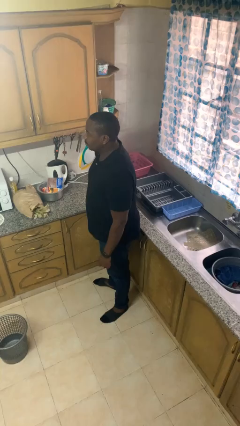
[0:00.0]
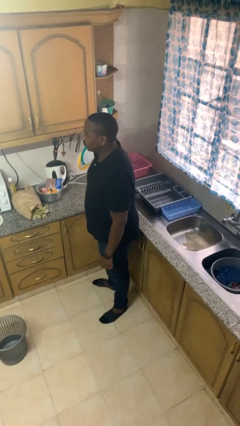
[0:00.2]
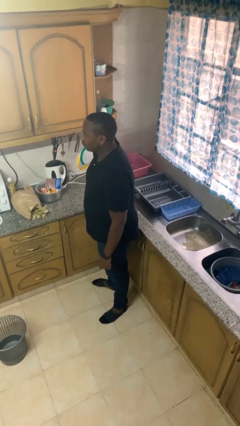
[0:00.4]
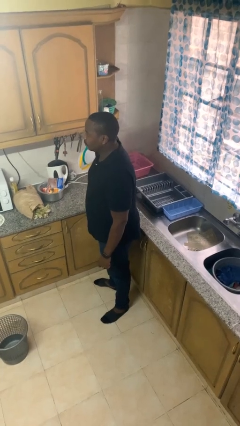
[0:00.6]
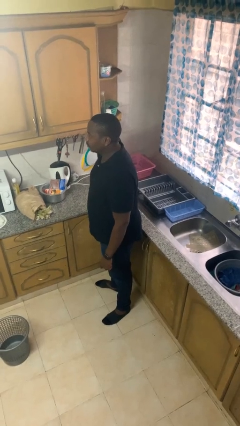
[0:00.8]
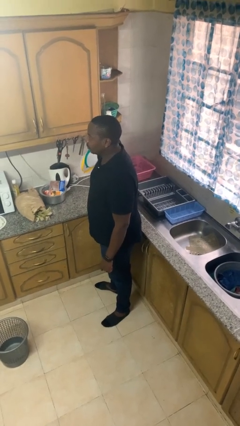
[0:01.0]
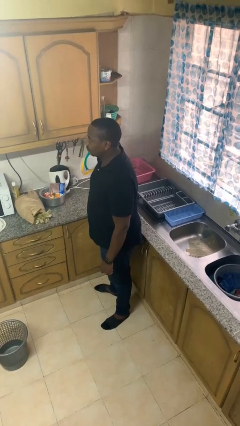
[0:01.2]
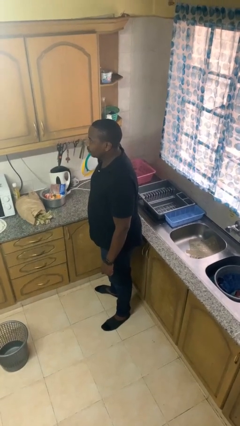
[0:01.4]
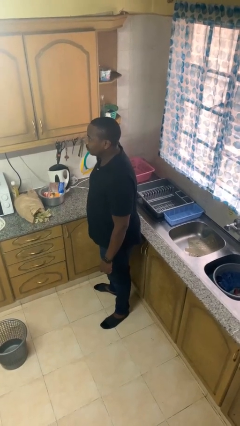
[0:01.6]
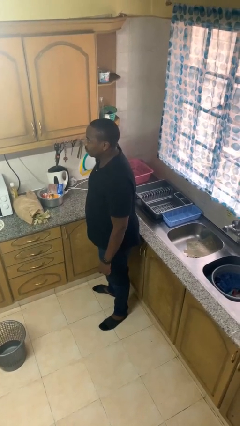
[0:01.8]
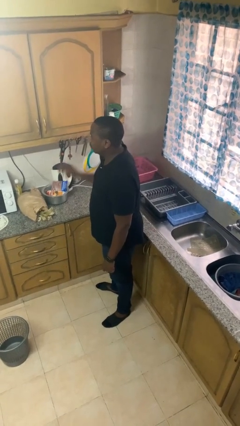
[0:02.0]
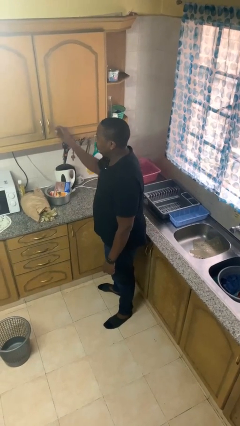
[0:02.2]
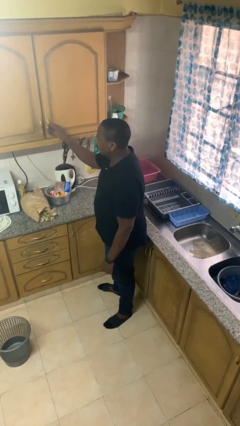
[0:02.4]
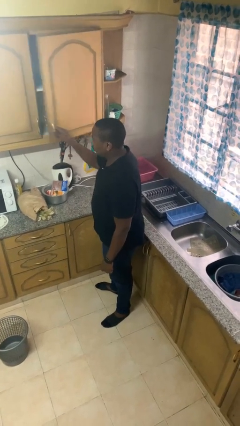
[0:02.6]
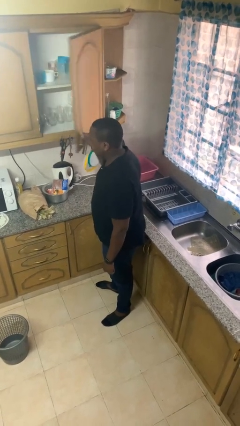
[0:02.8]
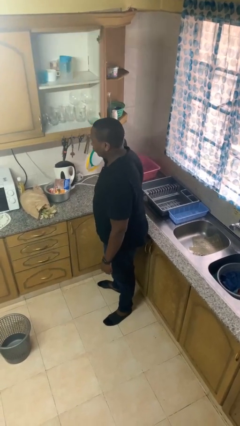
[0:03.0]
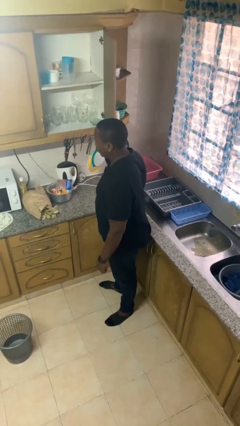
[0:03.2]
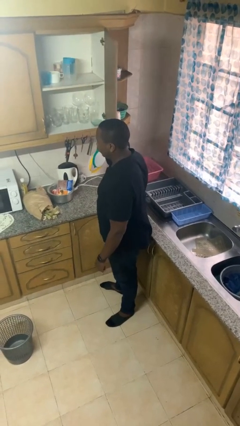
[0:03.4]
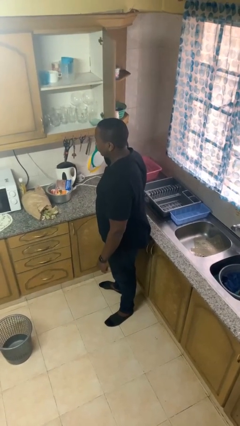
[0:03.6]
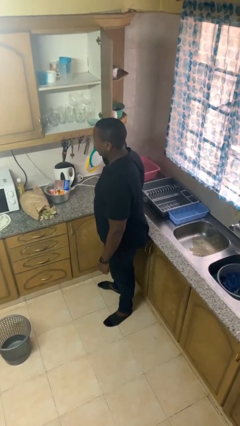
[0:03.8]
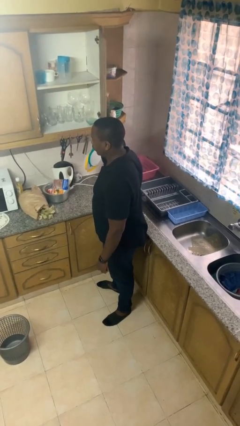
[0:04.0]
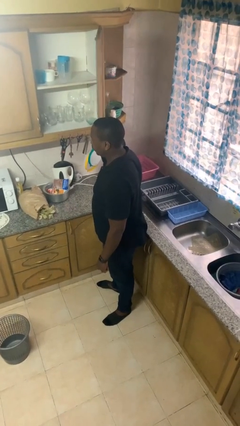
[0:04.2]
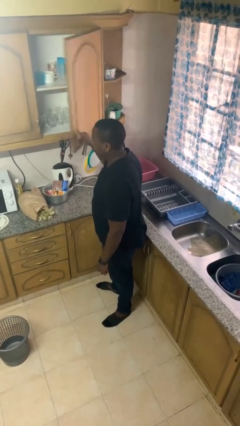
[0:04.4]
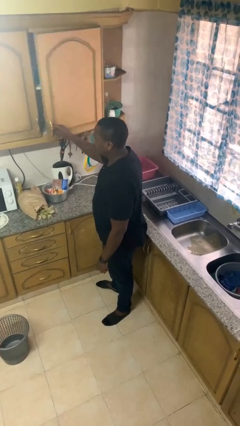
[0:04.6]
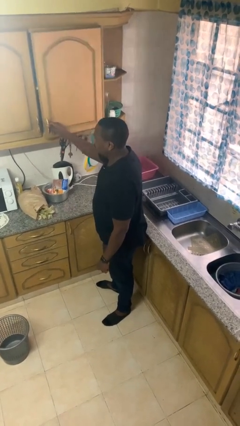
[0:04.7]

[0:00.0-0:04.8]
person opens cabinet

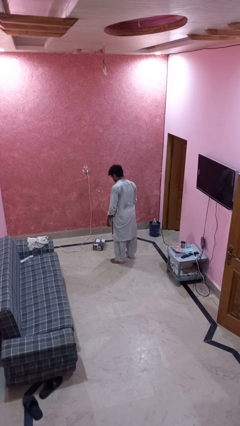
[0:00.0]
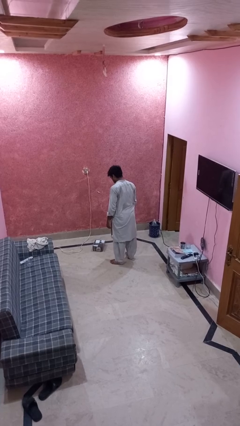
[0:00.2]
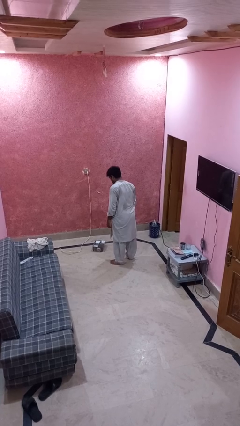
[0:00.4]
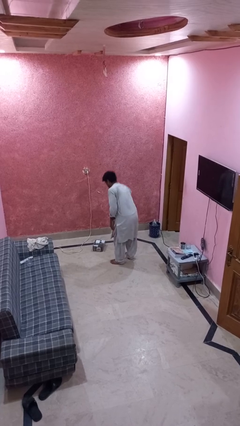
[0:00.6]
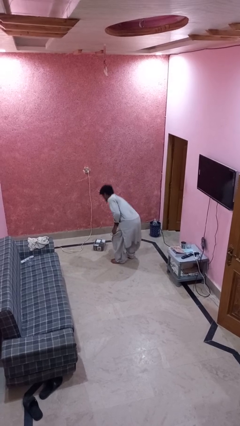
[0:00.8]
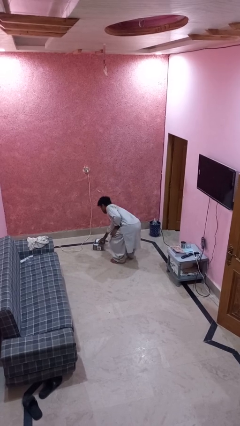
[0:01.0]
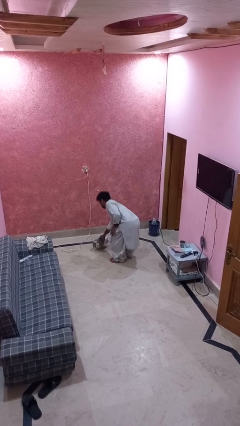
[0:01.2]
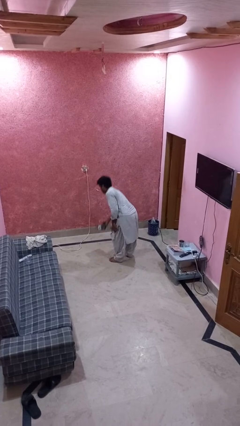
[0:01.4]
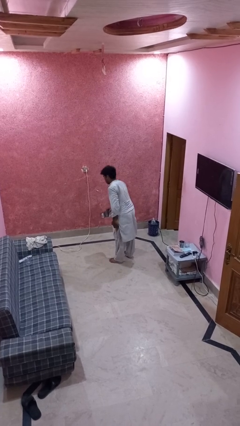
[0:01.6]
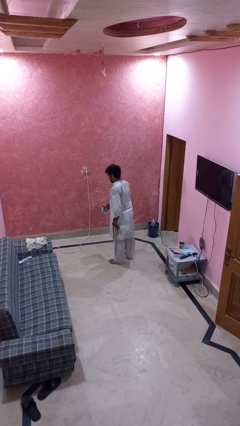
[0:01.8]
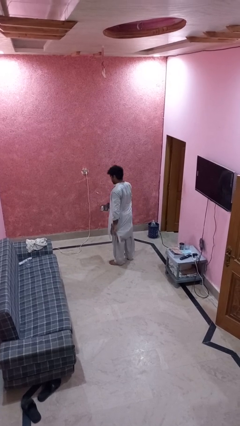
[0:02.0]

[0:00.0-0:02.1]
person picks up object from floor

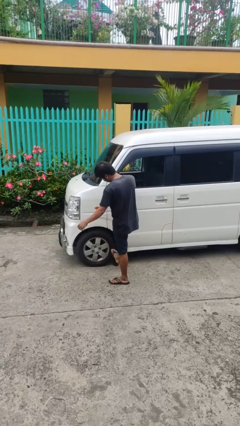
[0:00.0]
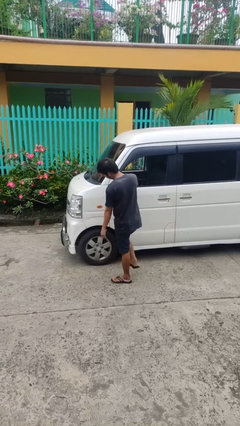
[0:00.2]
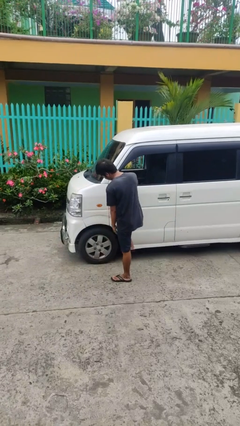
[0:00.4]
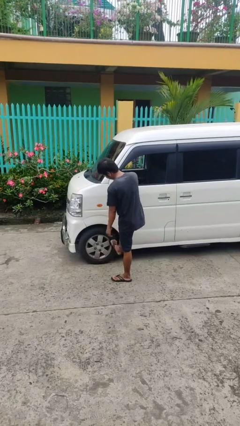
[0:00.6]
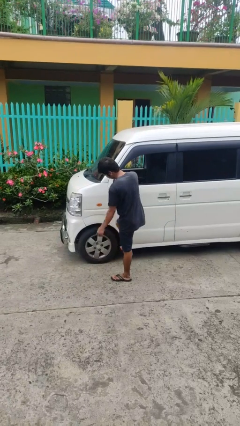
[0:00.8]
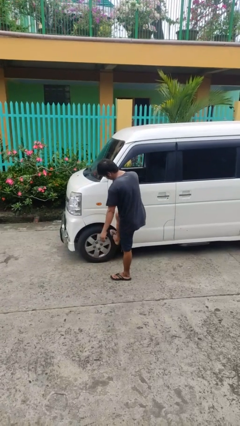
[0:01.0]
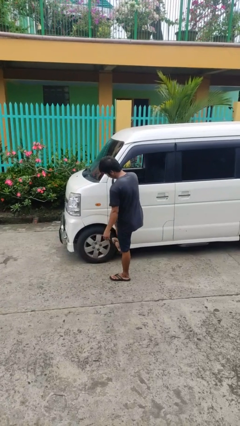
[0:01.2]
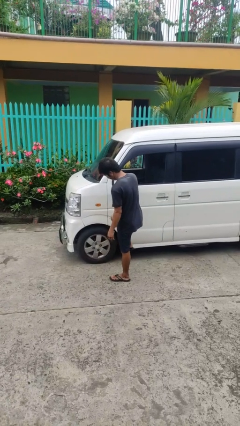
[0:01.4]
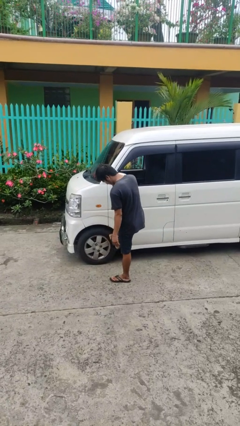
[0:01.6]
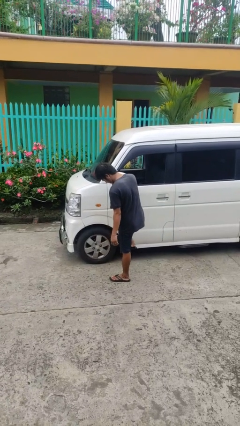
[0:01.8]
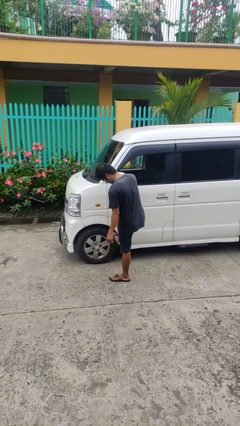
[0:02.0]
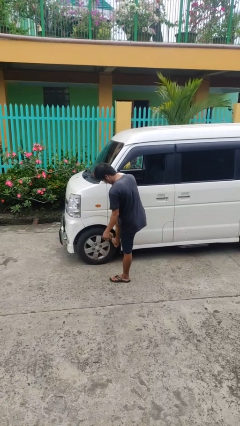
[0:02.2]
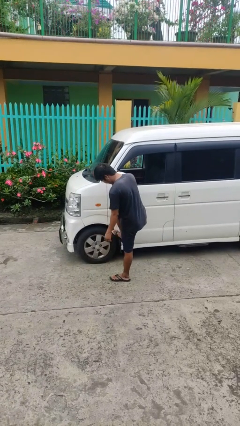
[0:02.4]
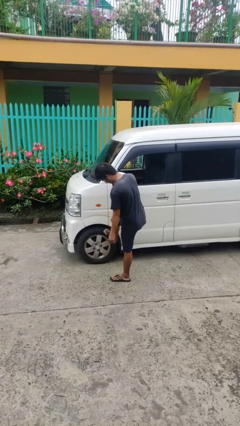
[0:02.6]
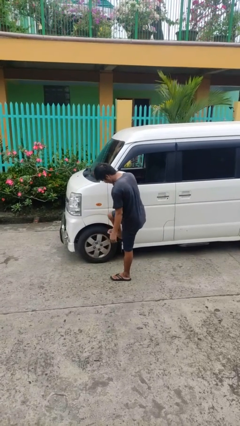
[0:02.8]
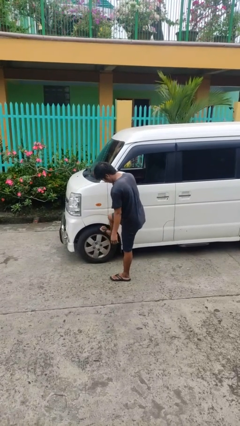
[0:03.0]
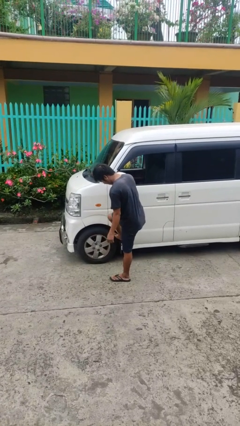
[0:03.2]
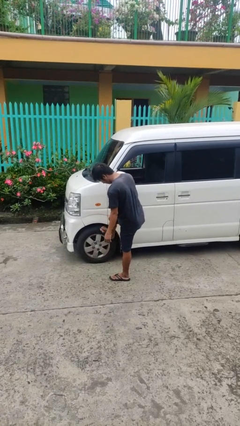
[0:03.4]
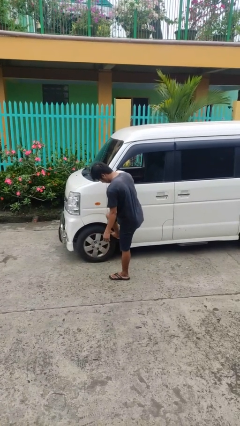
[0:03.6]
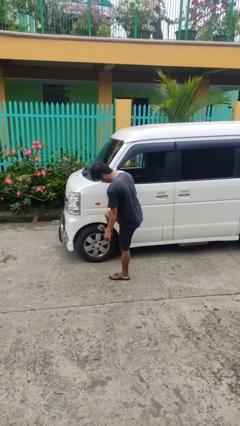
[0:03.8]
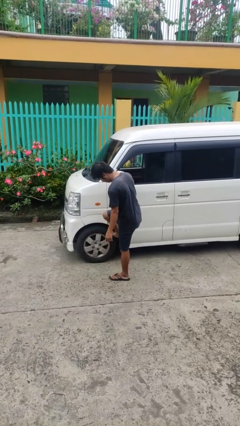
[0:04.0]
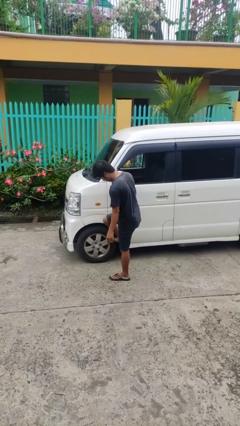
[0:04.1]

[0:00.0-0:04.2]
person kicks car tires

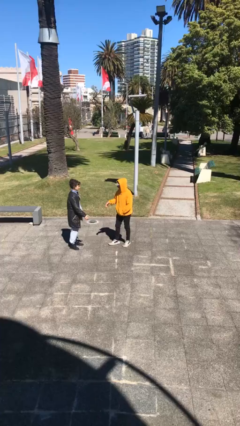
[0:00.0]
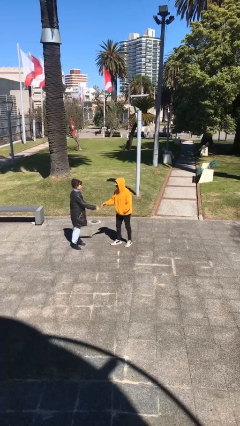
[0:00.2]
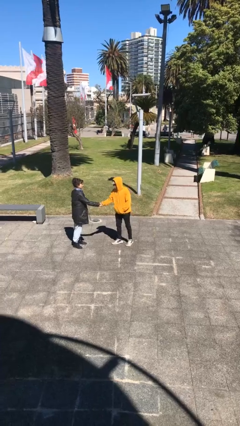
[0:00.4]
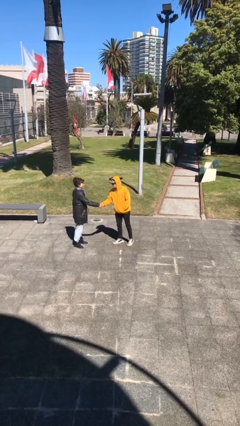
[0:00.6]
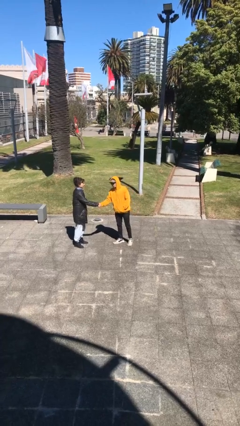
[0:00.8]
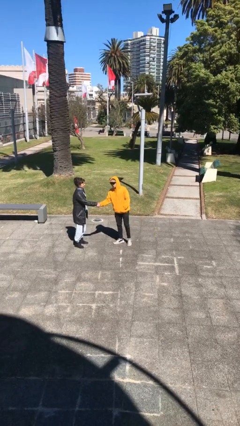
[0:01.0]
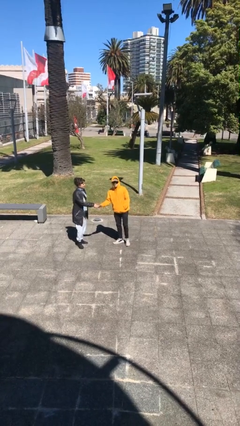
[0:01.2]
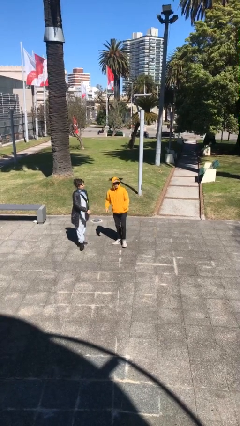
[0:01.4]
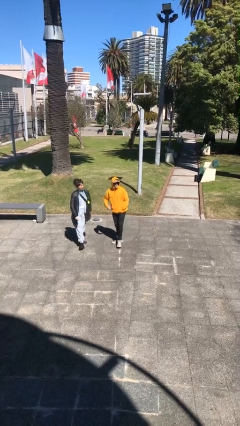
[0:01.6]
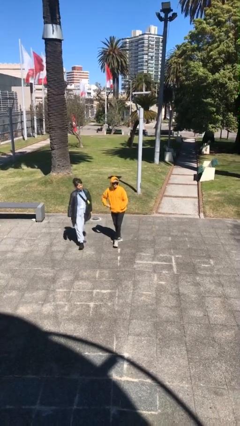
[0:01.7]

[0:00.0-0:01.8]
person shakes hand

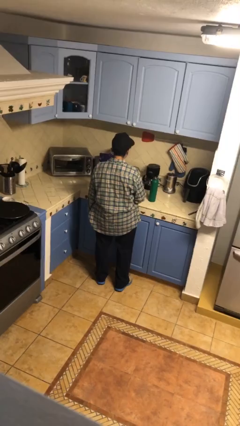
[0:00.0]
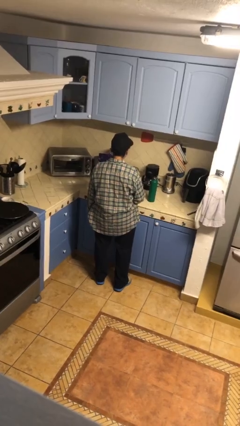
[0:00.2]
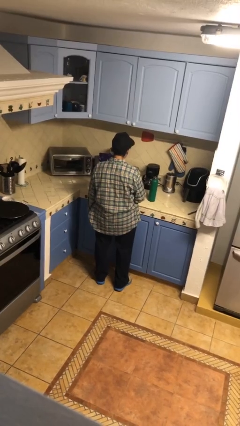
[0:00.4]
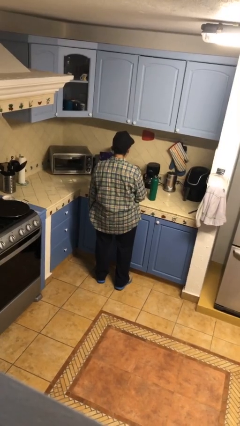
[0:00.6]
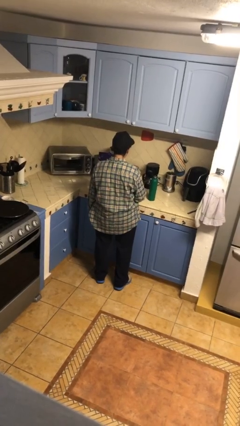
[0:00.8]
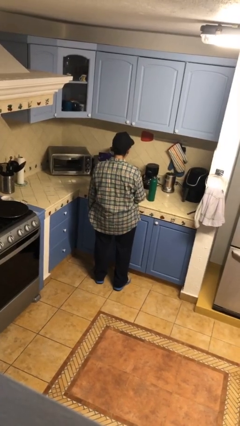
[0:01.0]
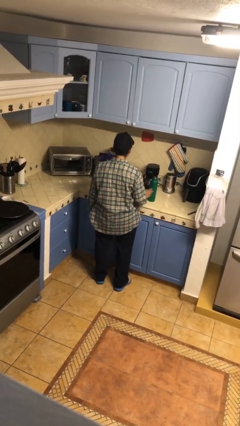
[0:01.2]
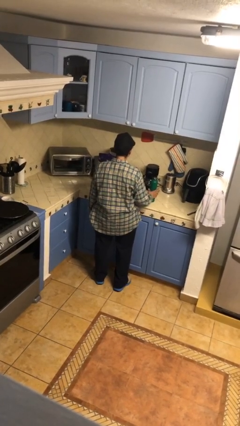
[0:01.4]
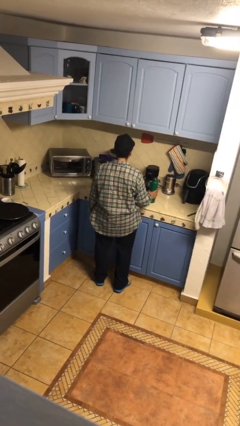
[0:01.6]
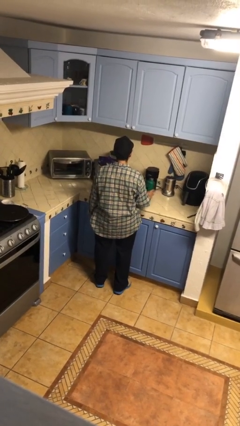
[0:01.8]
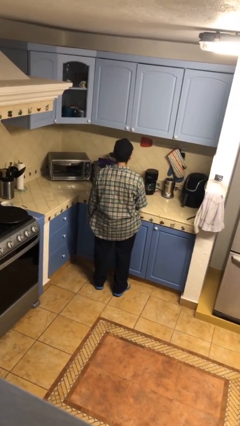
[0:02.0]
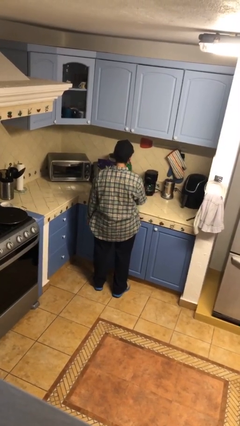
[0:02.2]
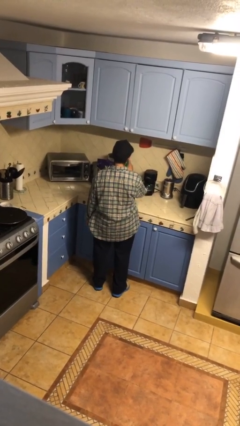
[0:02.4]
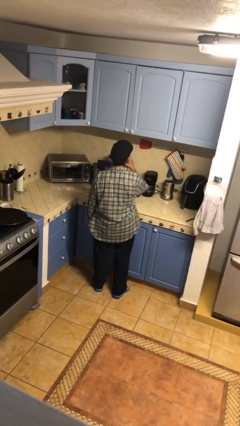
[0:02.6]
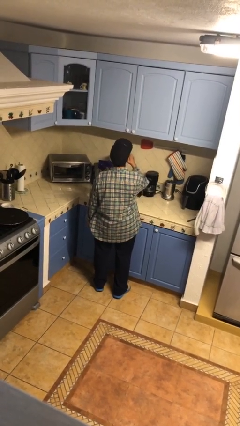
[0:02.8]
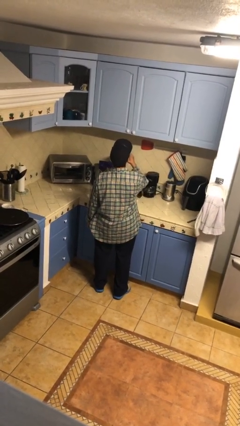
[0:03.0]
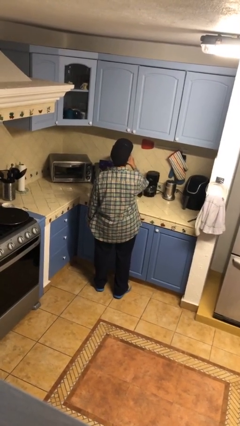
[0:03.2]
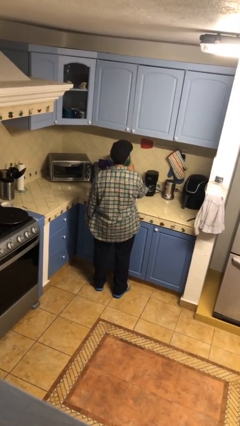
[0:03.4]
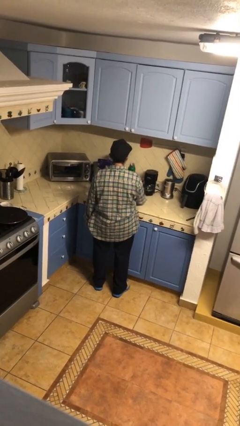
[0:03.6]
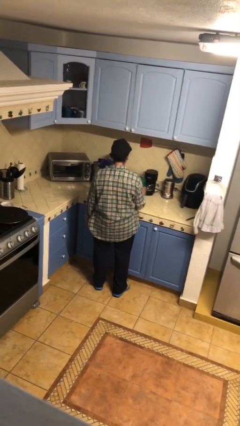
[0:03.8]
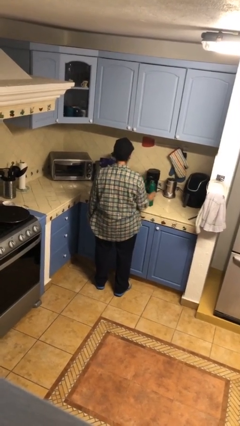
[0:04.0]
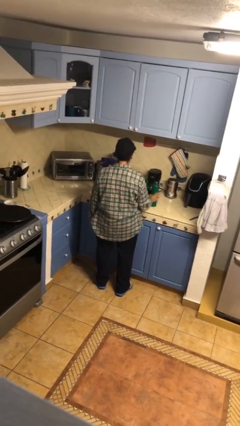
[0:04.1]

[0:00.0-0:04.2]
person drinks from bottle

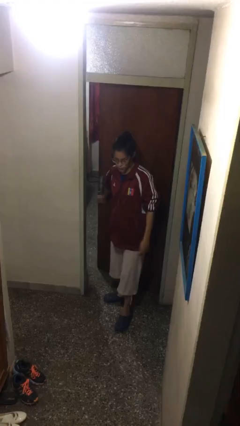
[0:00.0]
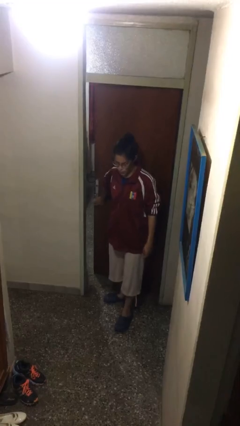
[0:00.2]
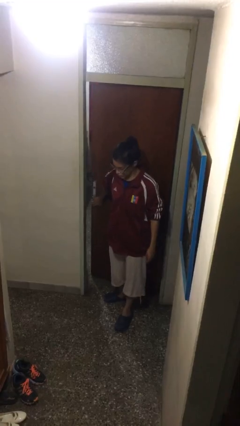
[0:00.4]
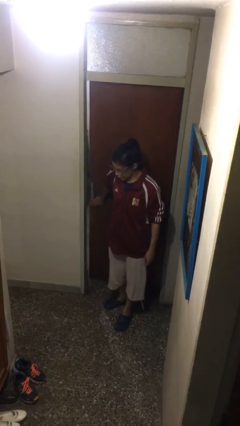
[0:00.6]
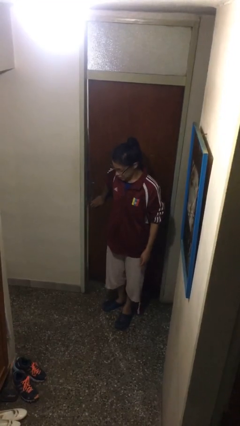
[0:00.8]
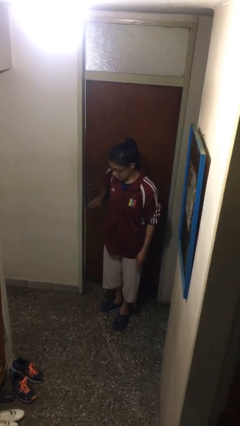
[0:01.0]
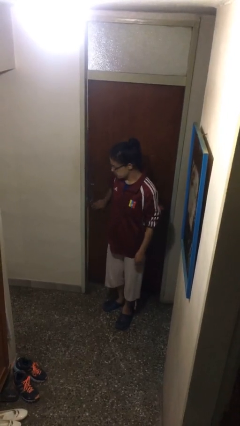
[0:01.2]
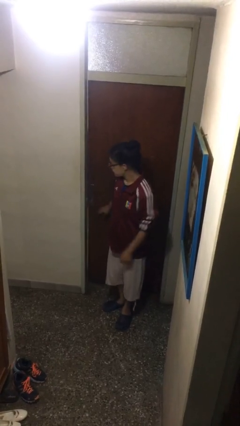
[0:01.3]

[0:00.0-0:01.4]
person closes facility door
